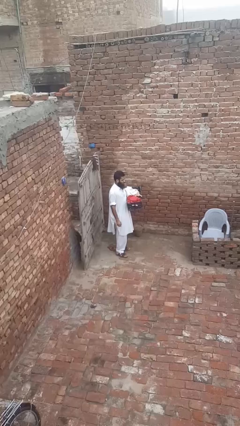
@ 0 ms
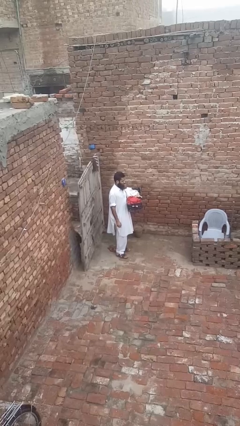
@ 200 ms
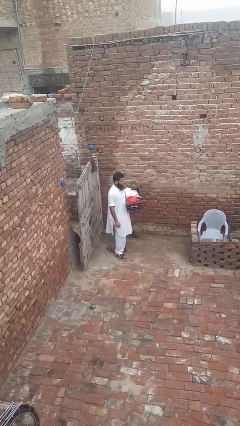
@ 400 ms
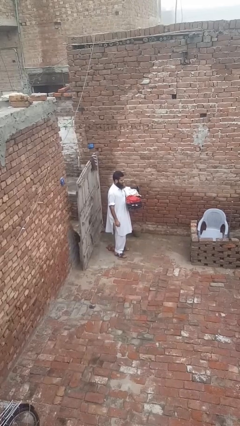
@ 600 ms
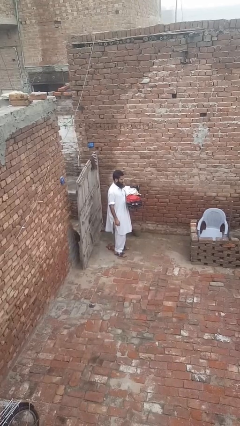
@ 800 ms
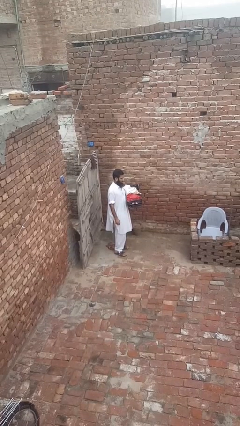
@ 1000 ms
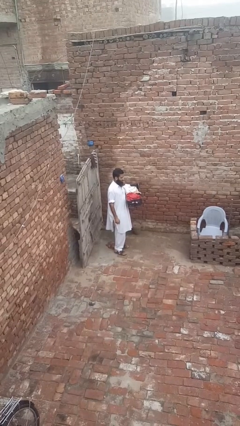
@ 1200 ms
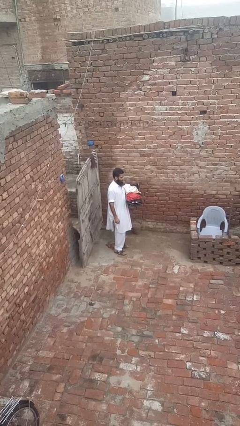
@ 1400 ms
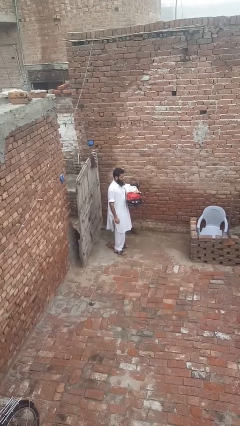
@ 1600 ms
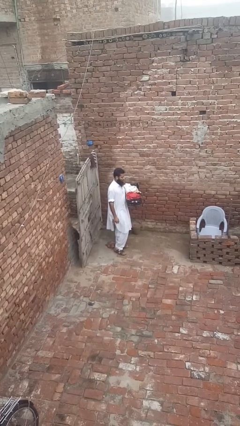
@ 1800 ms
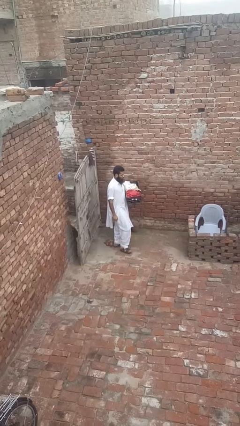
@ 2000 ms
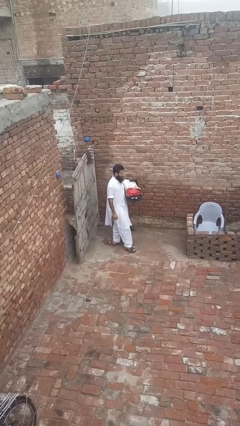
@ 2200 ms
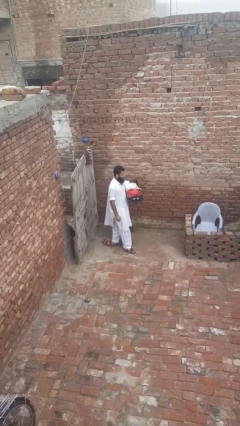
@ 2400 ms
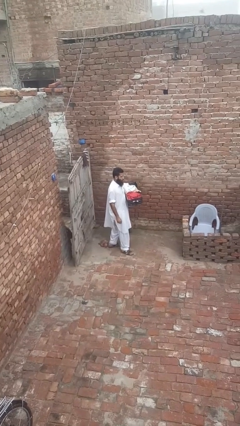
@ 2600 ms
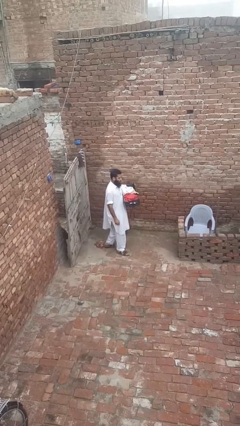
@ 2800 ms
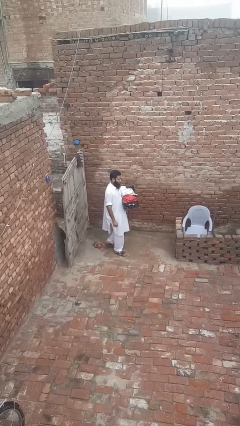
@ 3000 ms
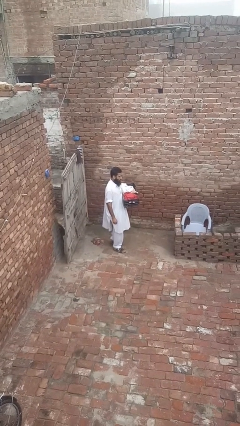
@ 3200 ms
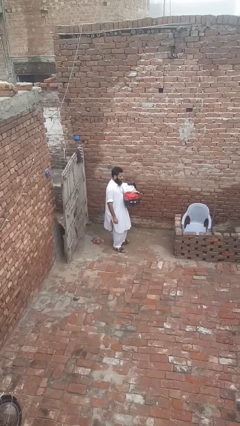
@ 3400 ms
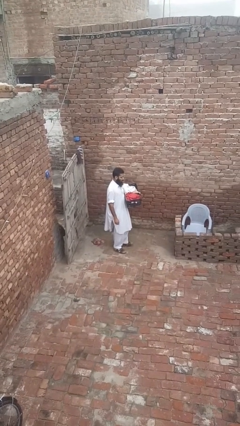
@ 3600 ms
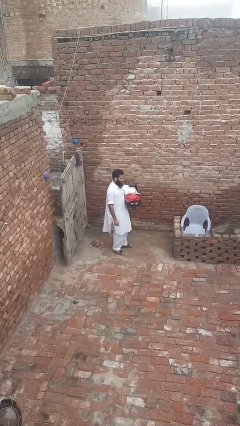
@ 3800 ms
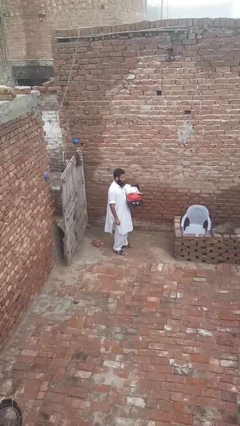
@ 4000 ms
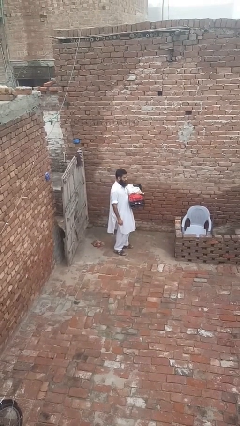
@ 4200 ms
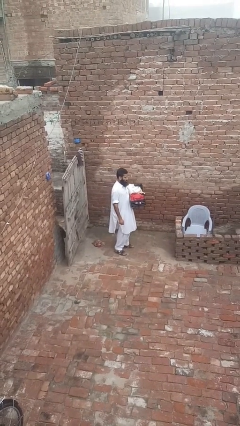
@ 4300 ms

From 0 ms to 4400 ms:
person carries laundry basket

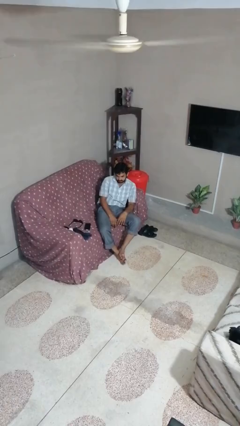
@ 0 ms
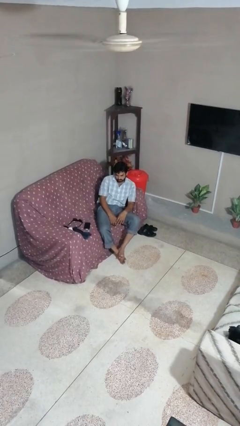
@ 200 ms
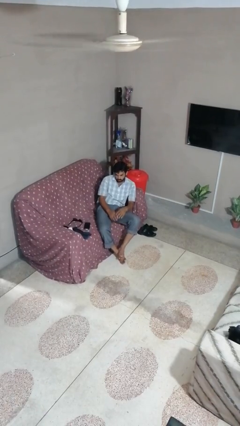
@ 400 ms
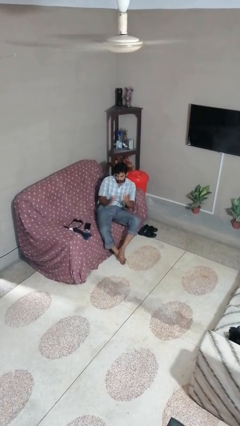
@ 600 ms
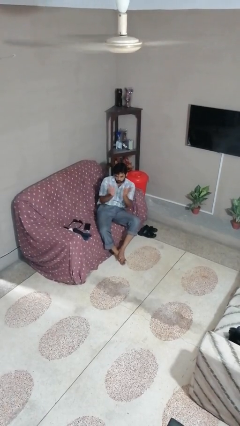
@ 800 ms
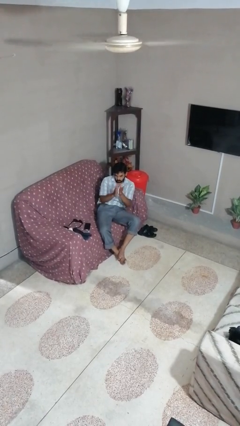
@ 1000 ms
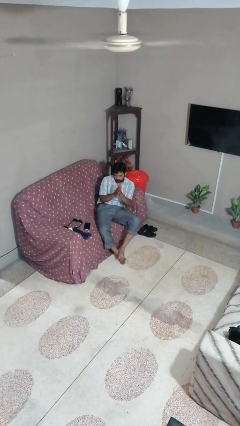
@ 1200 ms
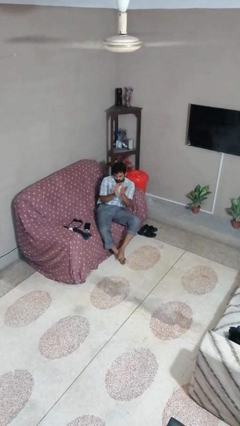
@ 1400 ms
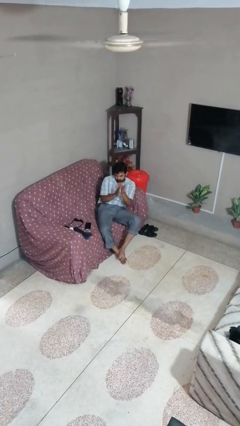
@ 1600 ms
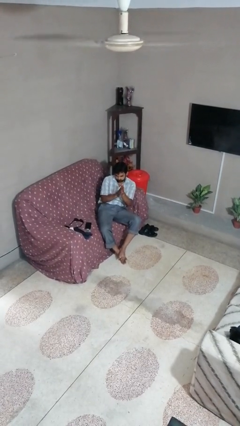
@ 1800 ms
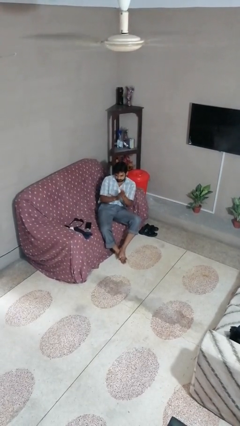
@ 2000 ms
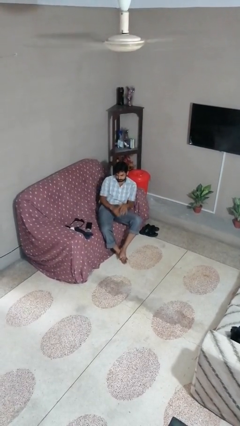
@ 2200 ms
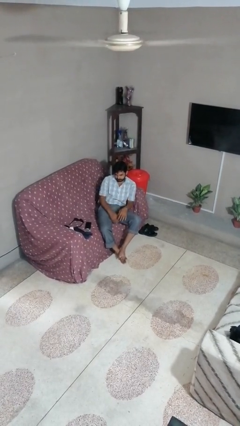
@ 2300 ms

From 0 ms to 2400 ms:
person claps hands

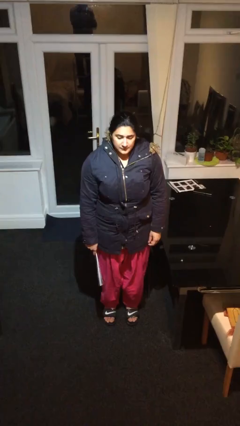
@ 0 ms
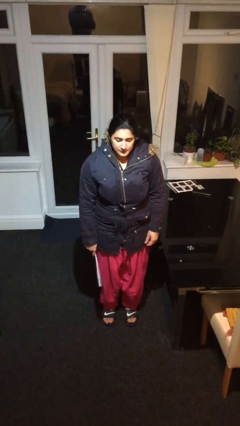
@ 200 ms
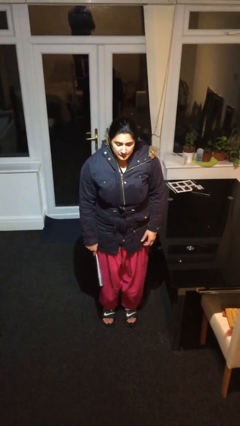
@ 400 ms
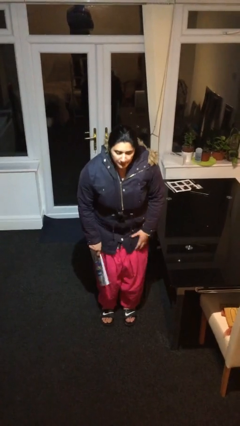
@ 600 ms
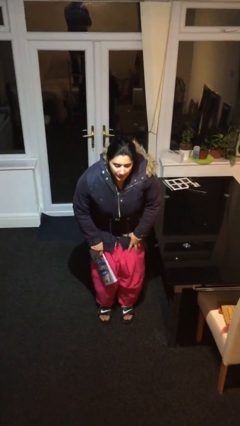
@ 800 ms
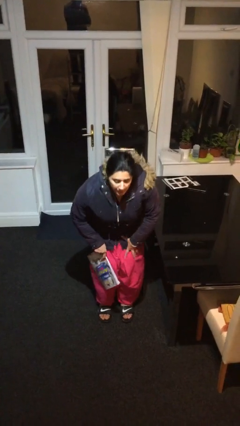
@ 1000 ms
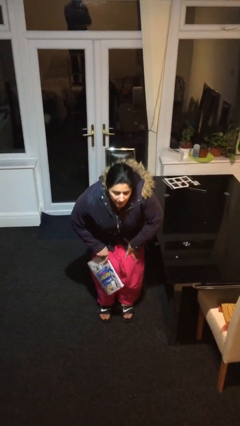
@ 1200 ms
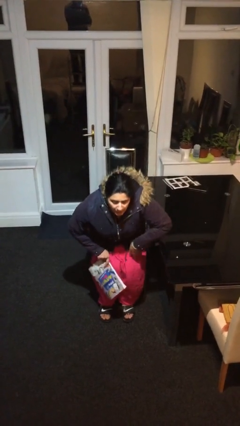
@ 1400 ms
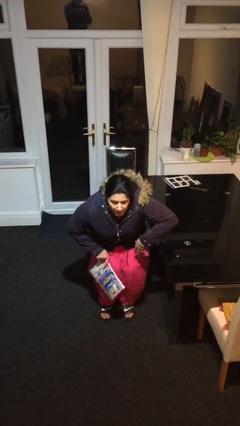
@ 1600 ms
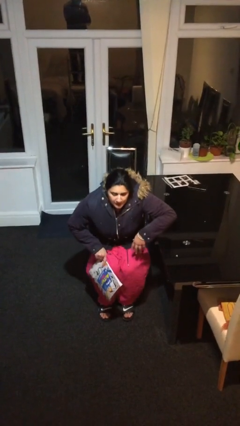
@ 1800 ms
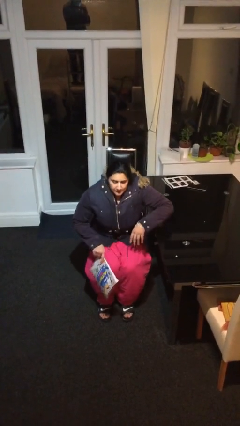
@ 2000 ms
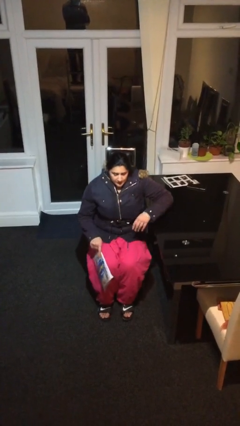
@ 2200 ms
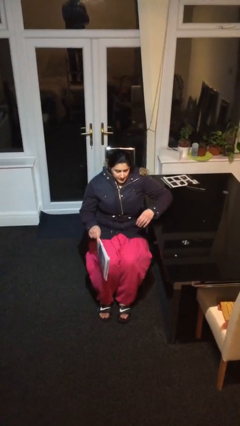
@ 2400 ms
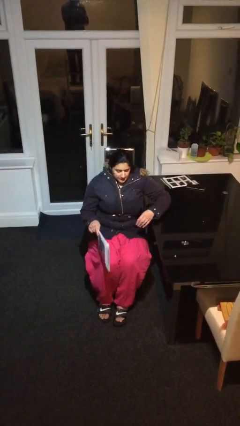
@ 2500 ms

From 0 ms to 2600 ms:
person sits down

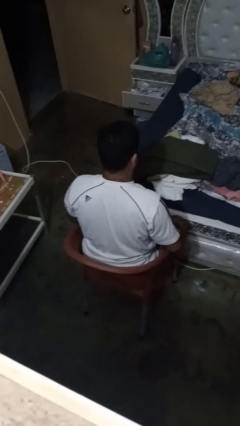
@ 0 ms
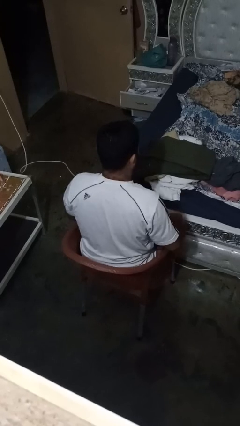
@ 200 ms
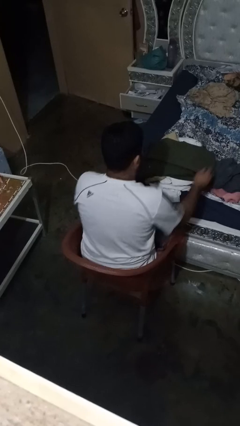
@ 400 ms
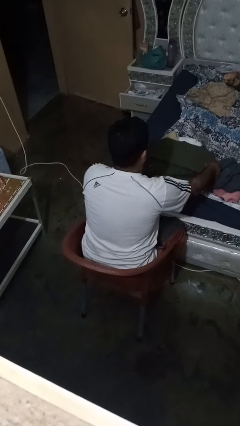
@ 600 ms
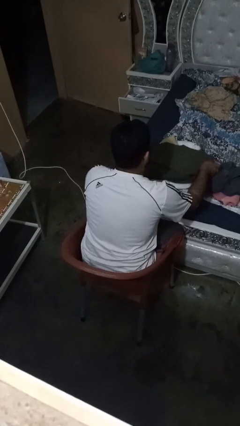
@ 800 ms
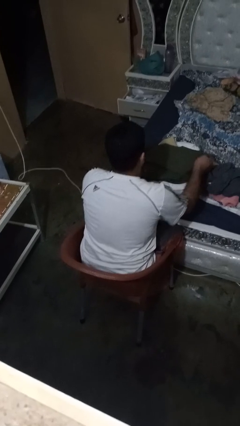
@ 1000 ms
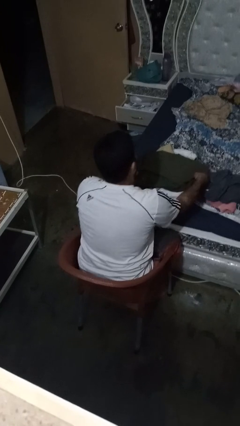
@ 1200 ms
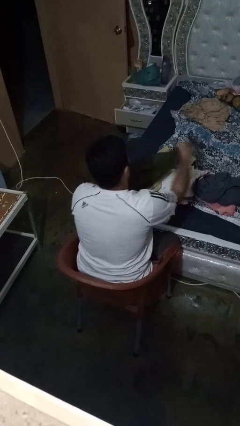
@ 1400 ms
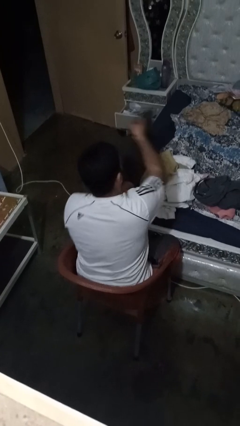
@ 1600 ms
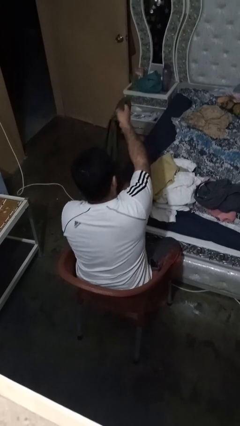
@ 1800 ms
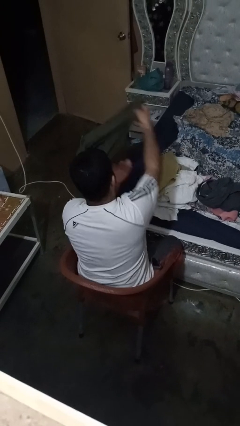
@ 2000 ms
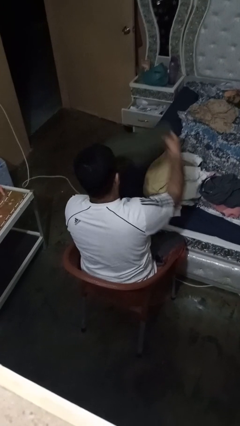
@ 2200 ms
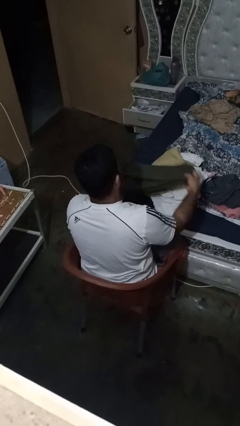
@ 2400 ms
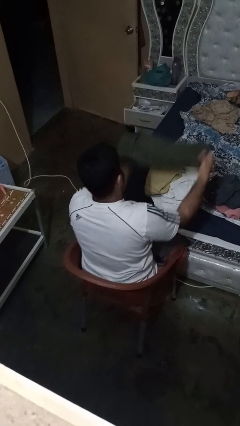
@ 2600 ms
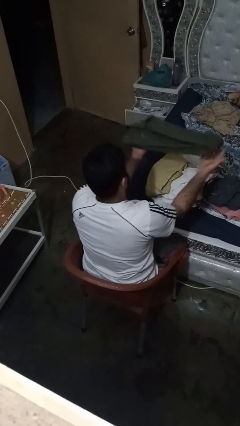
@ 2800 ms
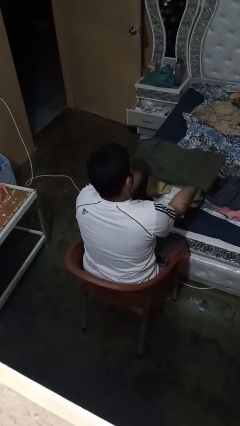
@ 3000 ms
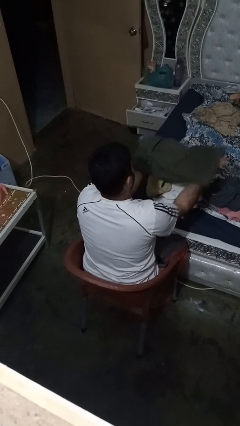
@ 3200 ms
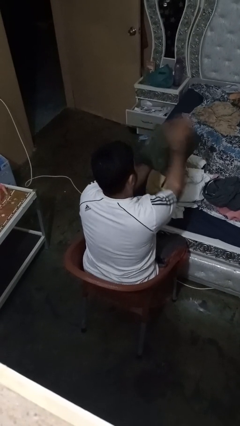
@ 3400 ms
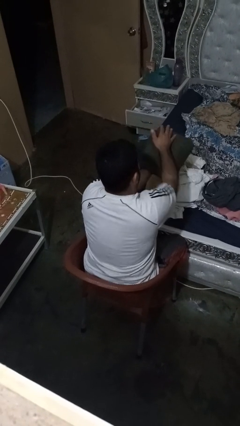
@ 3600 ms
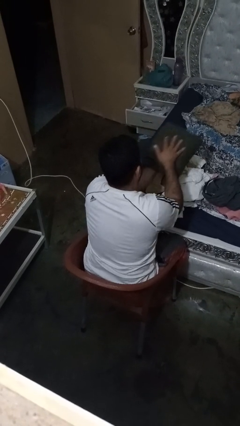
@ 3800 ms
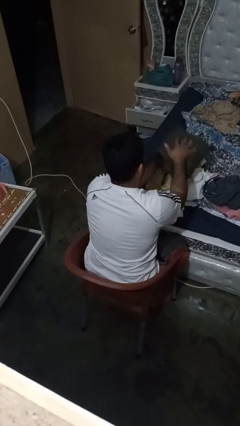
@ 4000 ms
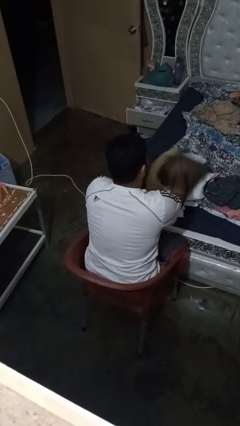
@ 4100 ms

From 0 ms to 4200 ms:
person folds pants

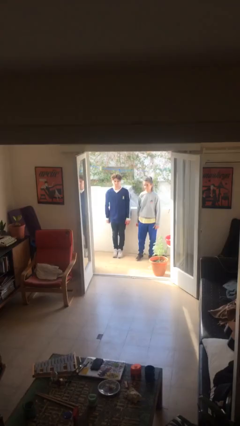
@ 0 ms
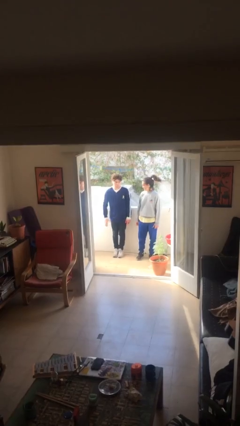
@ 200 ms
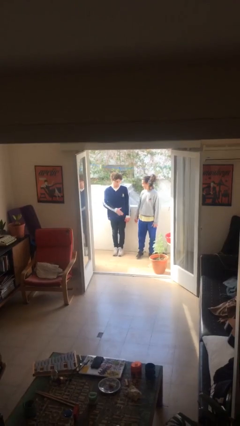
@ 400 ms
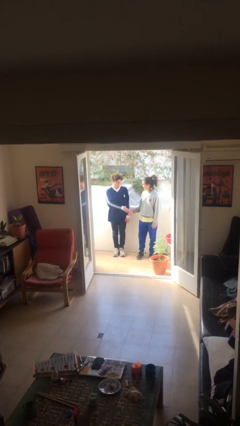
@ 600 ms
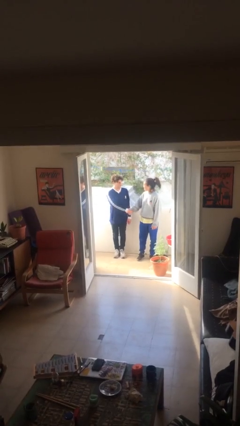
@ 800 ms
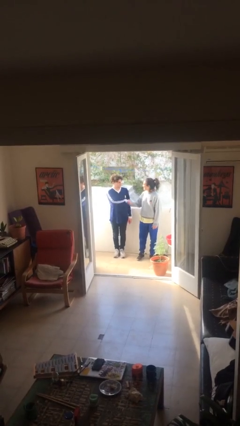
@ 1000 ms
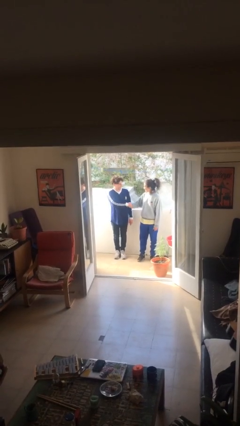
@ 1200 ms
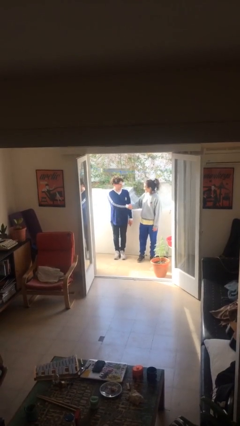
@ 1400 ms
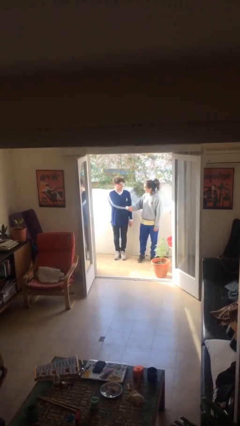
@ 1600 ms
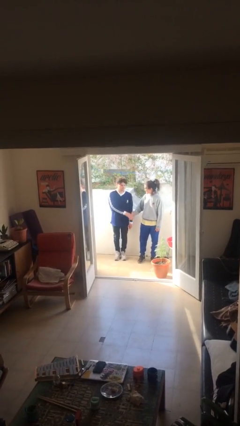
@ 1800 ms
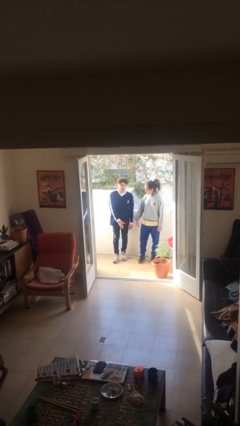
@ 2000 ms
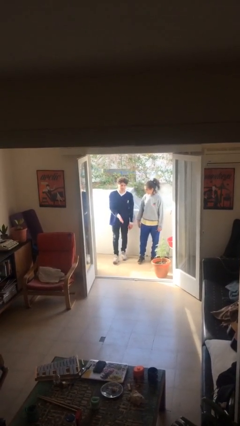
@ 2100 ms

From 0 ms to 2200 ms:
person shakes hand

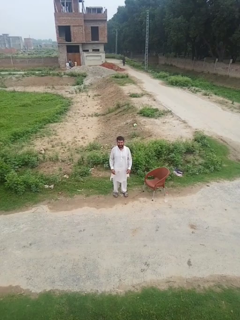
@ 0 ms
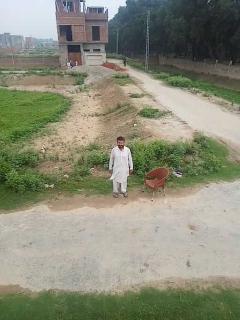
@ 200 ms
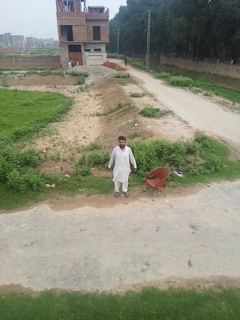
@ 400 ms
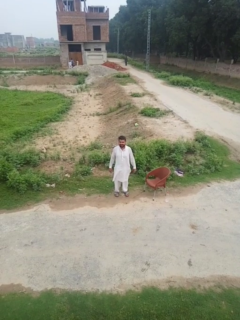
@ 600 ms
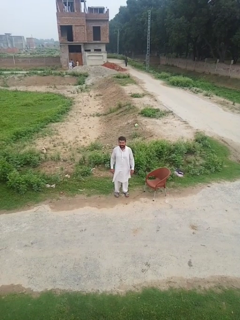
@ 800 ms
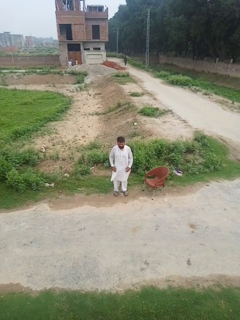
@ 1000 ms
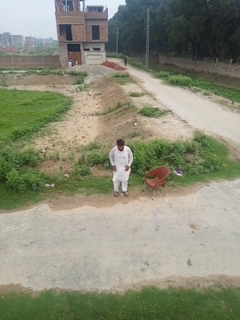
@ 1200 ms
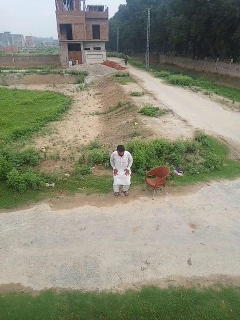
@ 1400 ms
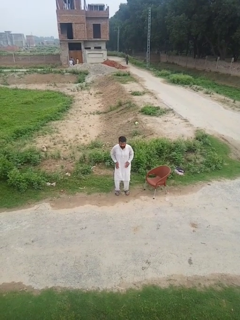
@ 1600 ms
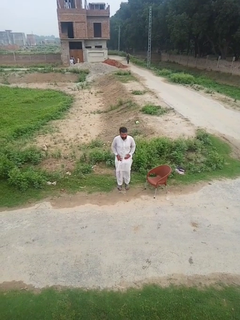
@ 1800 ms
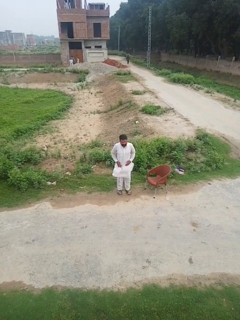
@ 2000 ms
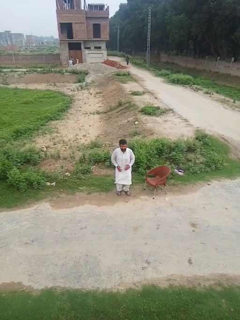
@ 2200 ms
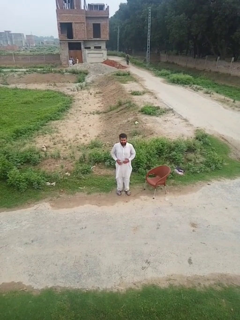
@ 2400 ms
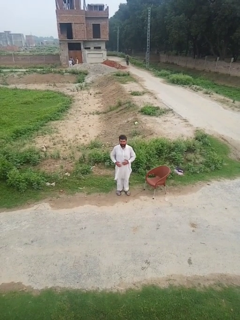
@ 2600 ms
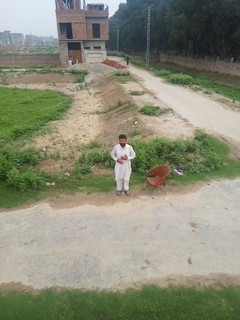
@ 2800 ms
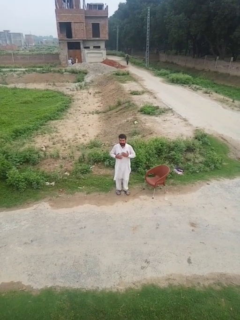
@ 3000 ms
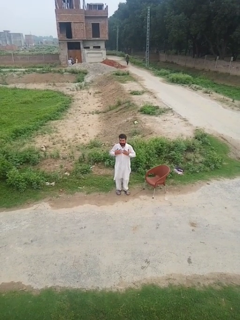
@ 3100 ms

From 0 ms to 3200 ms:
person jumps
